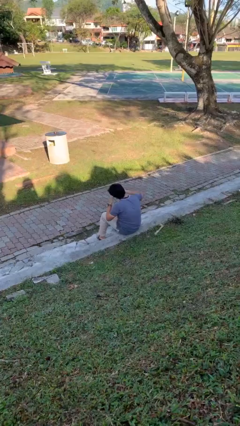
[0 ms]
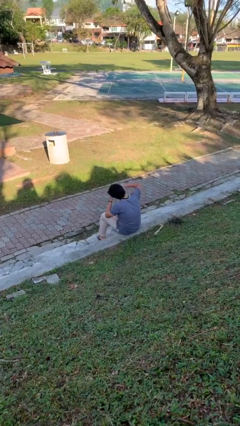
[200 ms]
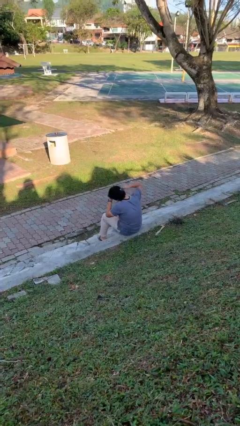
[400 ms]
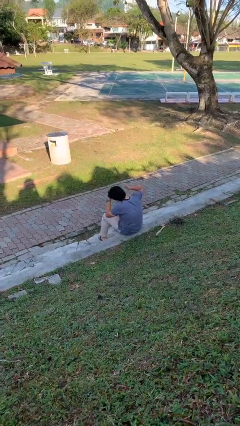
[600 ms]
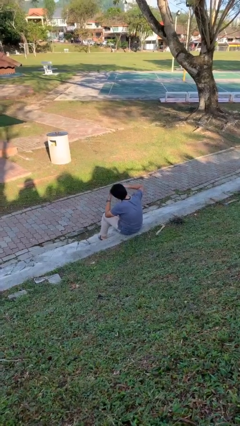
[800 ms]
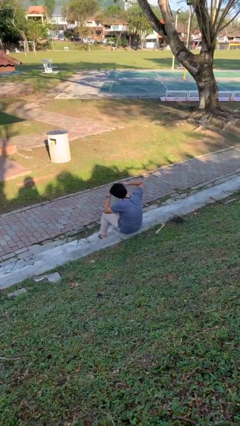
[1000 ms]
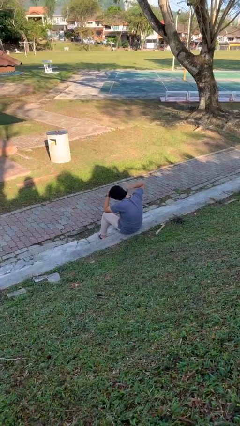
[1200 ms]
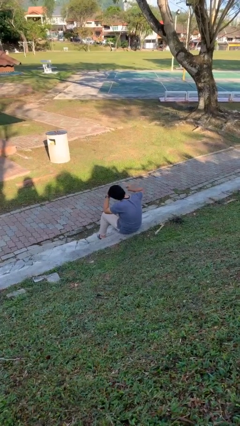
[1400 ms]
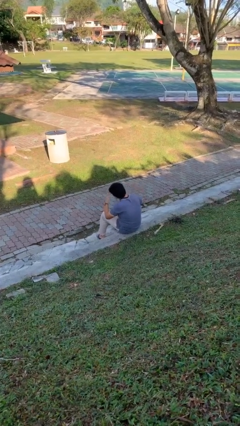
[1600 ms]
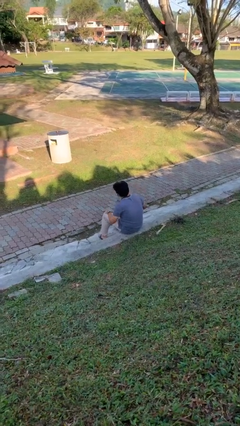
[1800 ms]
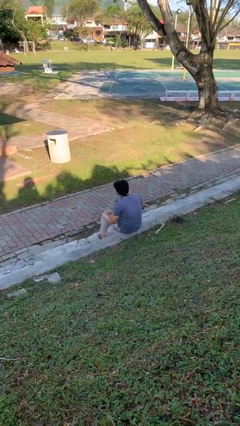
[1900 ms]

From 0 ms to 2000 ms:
person brushes hair

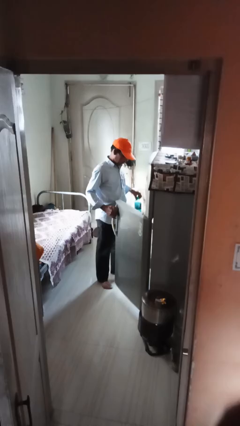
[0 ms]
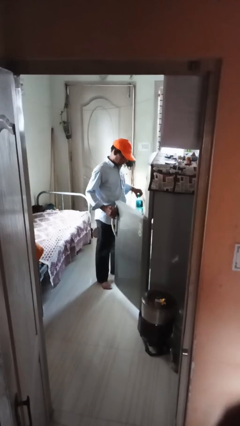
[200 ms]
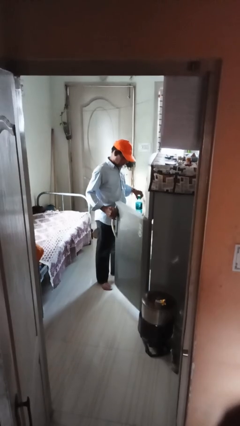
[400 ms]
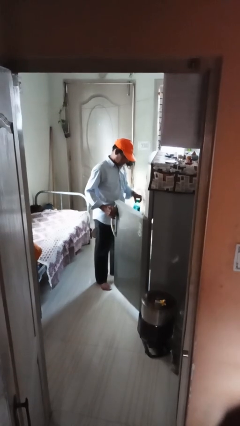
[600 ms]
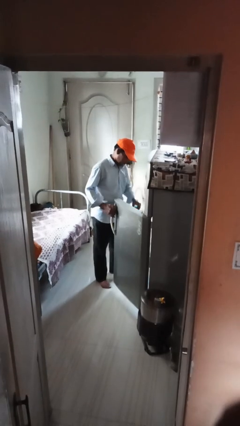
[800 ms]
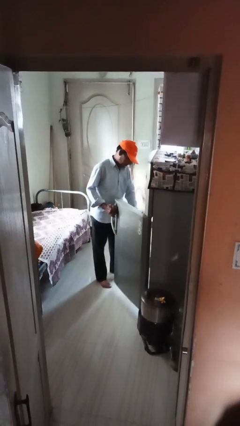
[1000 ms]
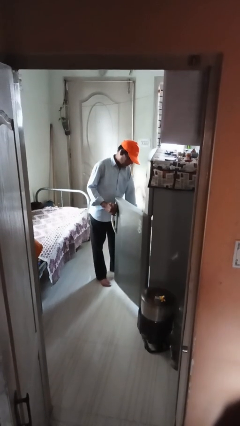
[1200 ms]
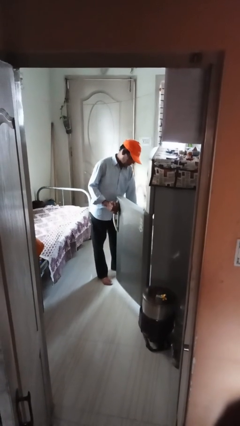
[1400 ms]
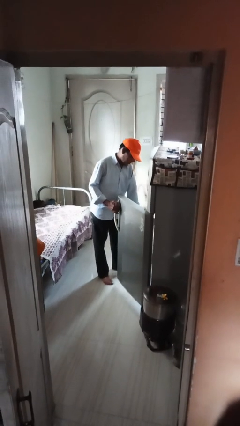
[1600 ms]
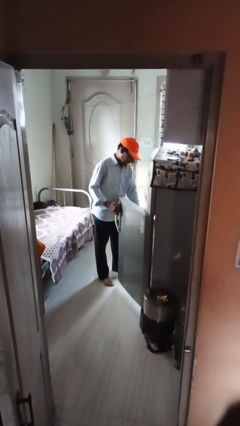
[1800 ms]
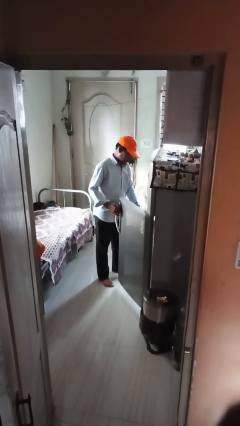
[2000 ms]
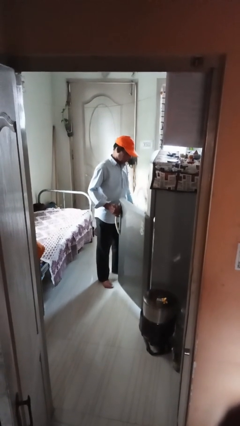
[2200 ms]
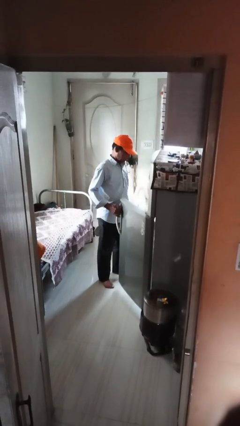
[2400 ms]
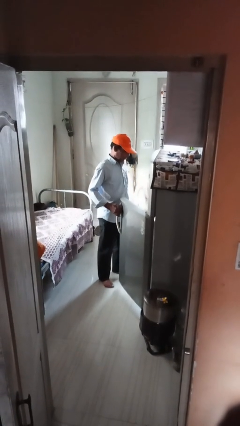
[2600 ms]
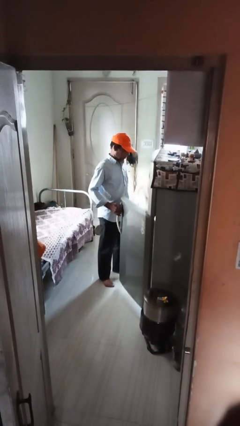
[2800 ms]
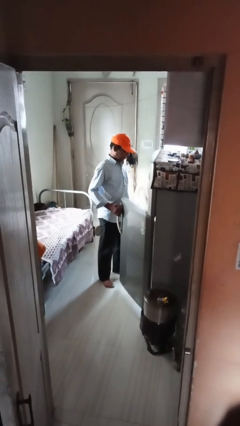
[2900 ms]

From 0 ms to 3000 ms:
person puts object into refrigerator

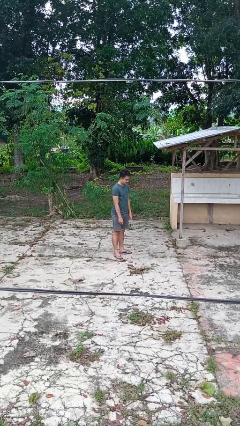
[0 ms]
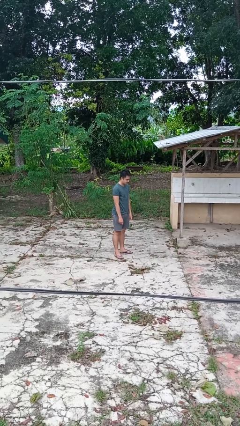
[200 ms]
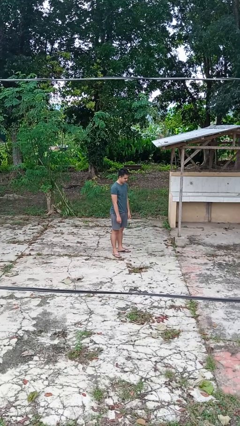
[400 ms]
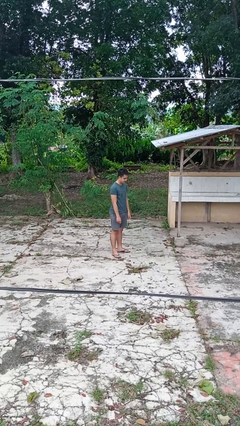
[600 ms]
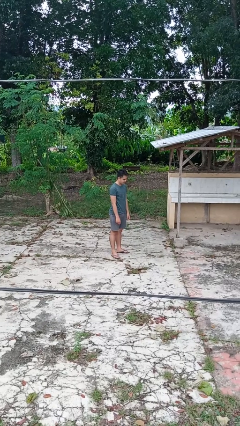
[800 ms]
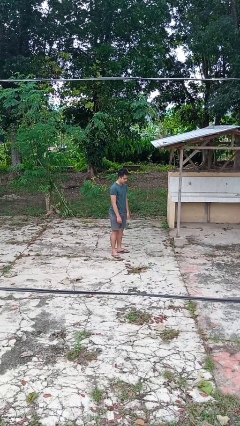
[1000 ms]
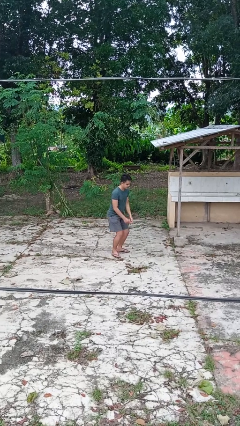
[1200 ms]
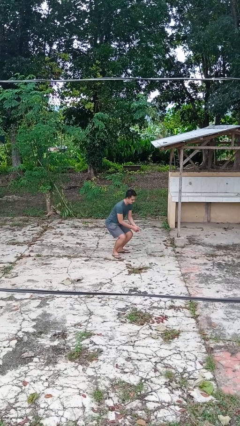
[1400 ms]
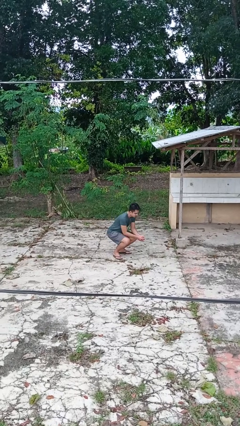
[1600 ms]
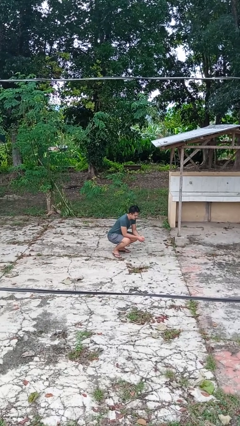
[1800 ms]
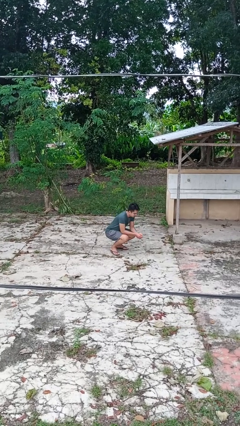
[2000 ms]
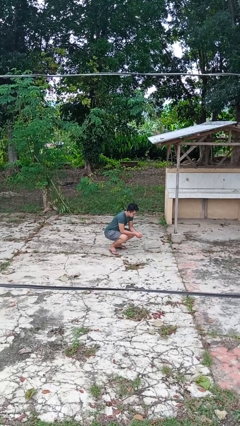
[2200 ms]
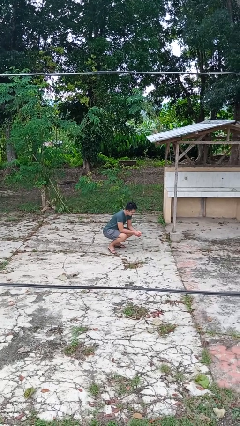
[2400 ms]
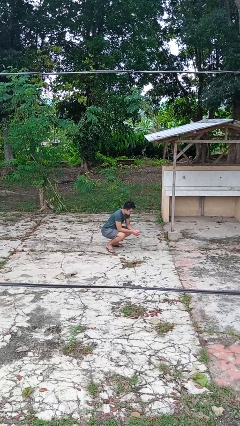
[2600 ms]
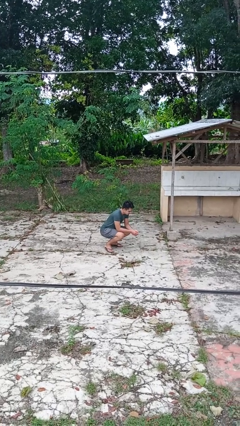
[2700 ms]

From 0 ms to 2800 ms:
person squats

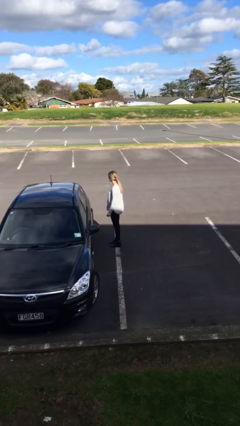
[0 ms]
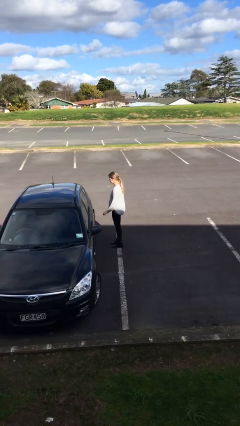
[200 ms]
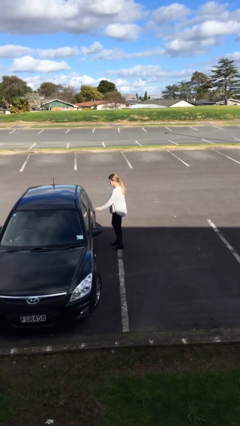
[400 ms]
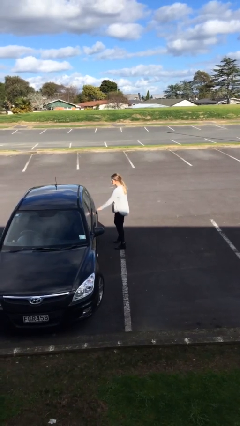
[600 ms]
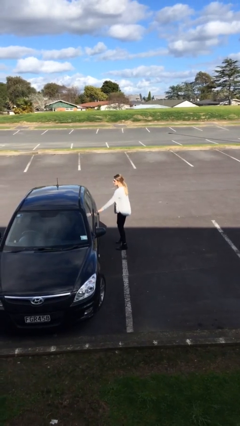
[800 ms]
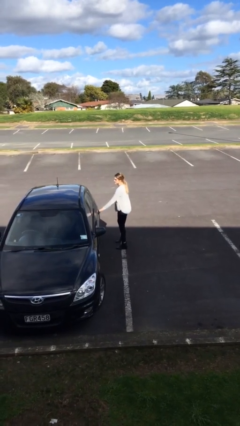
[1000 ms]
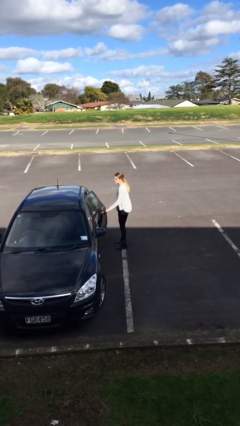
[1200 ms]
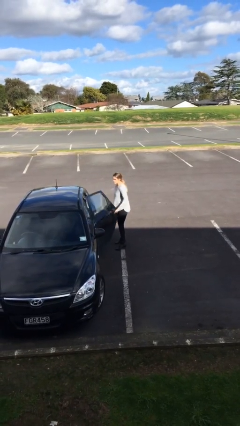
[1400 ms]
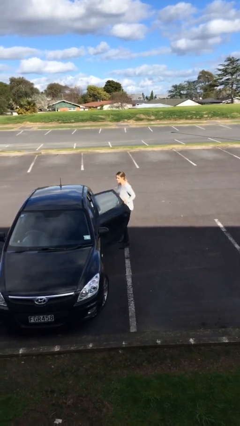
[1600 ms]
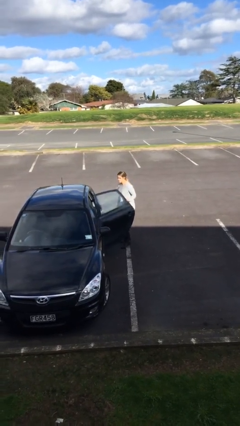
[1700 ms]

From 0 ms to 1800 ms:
person opens car door

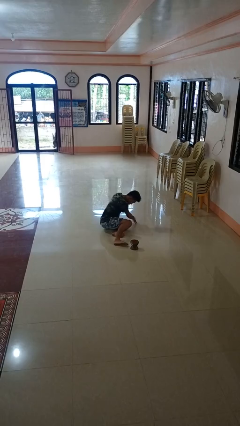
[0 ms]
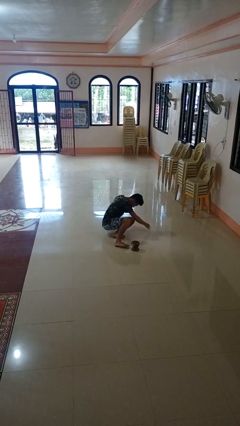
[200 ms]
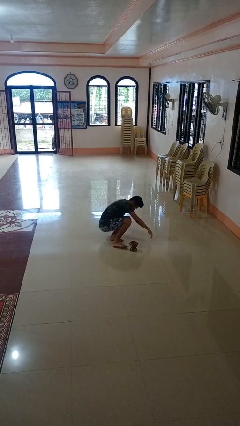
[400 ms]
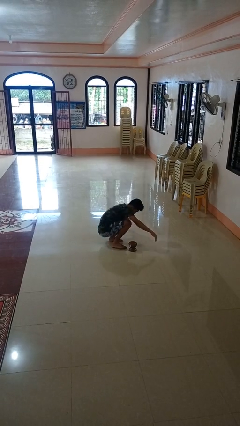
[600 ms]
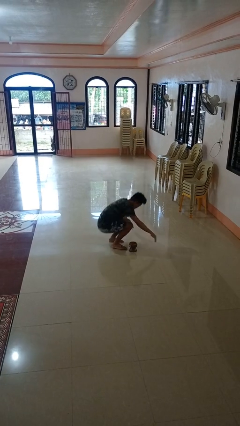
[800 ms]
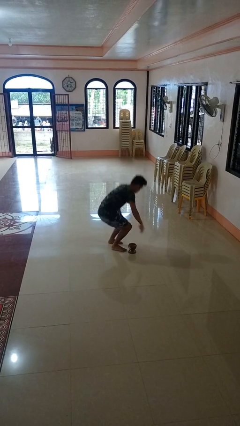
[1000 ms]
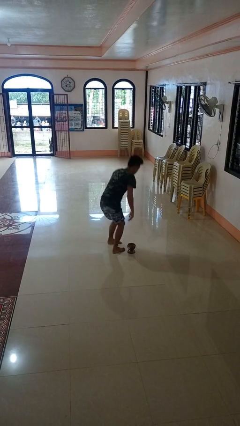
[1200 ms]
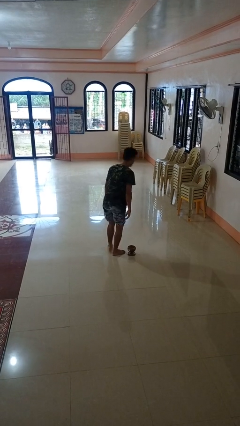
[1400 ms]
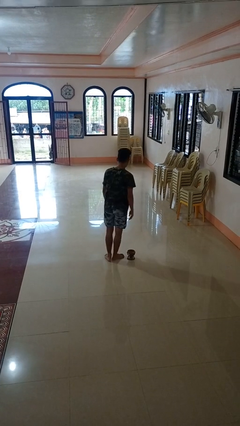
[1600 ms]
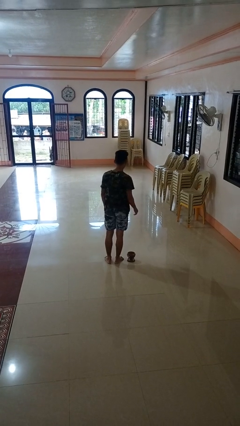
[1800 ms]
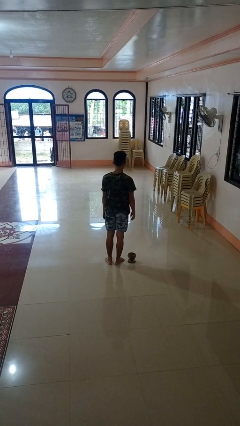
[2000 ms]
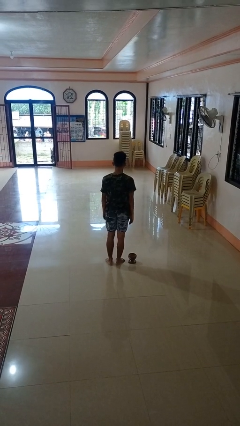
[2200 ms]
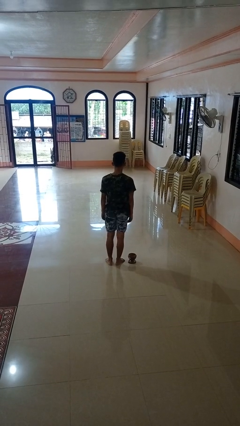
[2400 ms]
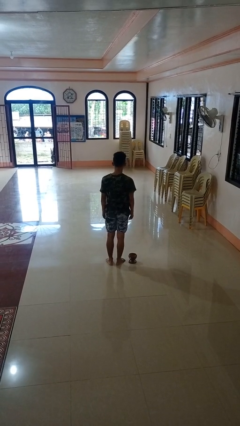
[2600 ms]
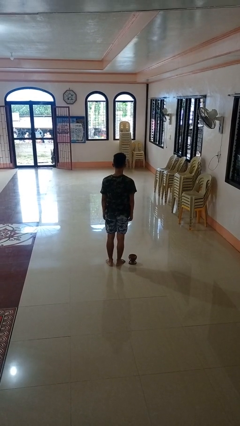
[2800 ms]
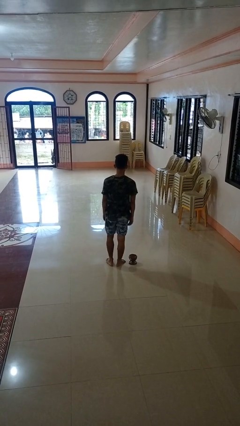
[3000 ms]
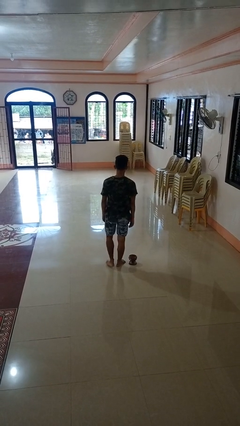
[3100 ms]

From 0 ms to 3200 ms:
person stands up from floor

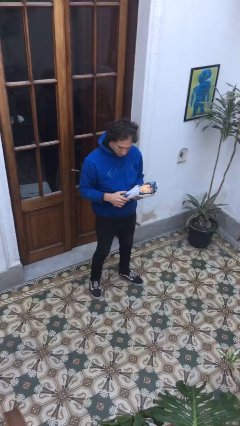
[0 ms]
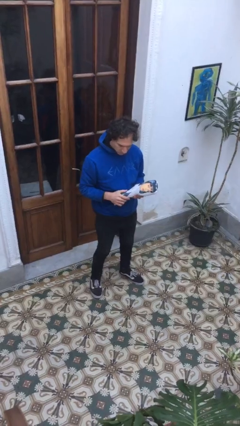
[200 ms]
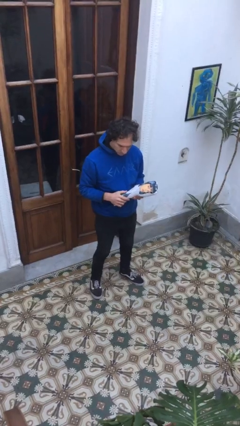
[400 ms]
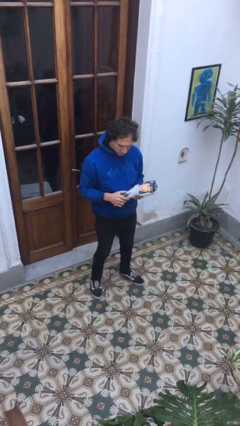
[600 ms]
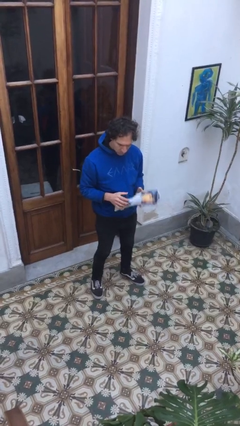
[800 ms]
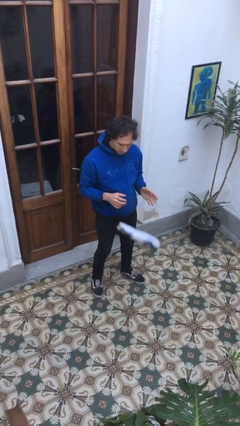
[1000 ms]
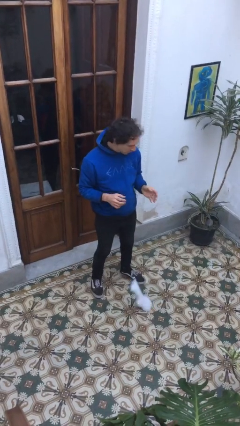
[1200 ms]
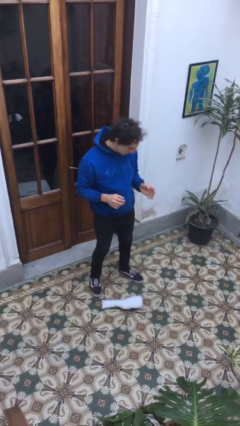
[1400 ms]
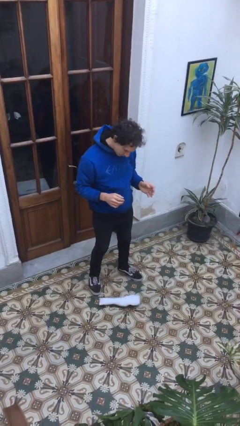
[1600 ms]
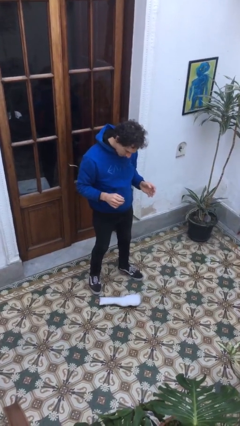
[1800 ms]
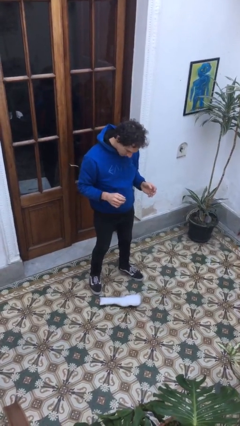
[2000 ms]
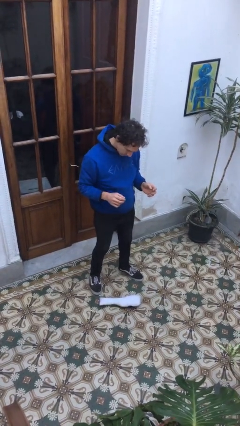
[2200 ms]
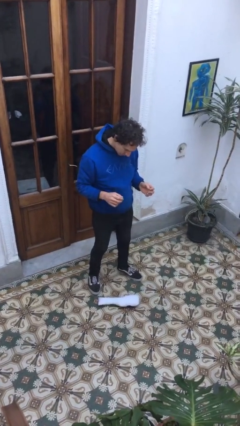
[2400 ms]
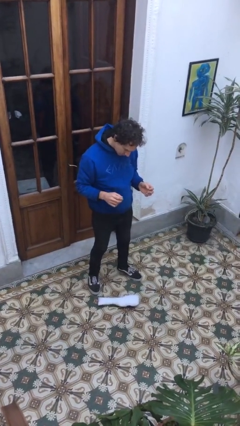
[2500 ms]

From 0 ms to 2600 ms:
person drops object

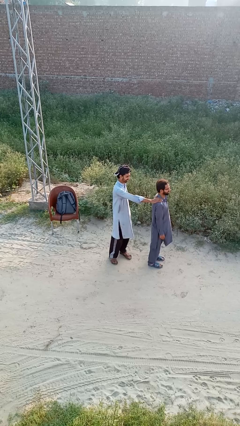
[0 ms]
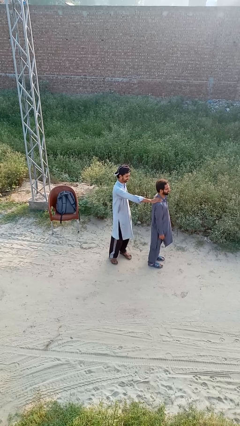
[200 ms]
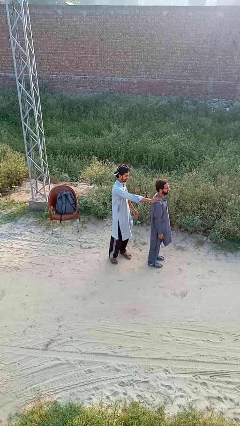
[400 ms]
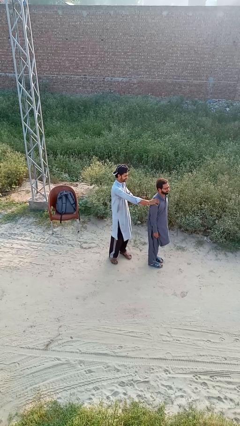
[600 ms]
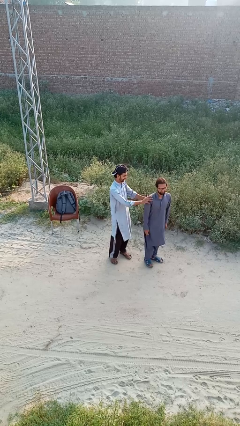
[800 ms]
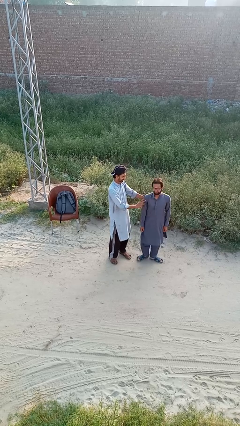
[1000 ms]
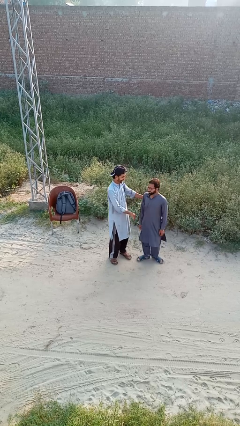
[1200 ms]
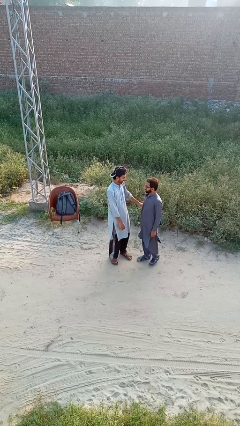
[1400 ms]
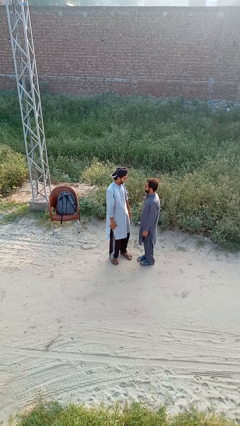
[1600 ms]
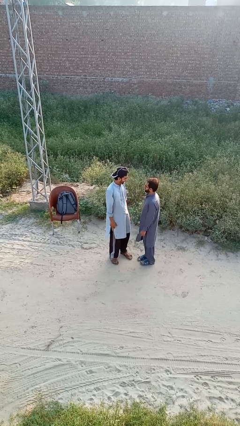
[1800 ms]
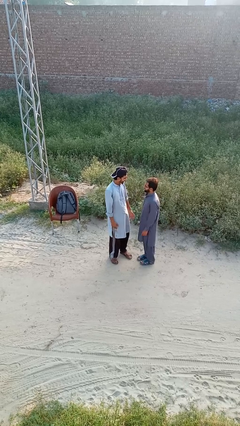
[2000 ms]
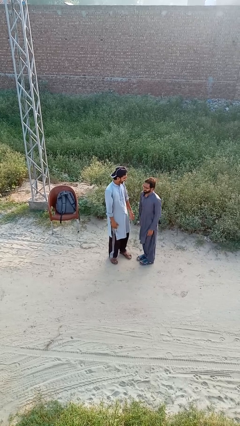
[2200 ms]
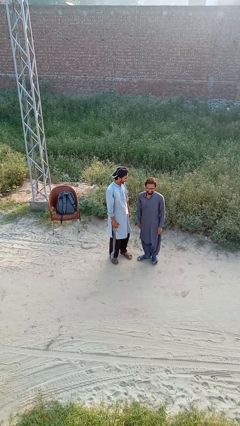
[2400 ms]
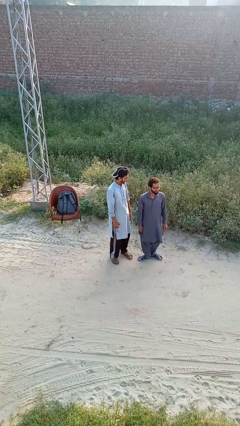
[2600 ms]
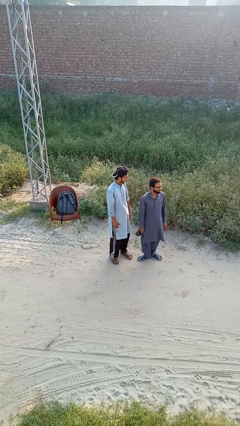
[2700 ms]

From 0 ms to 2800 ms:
person spins person around
